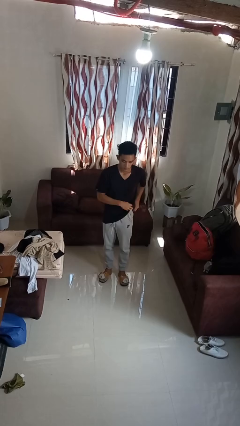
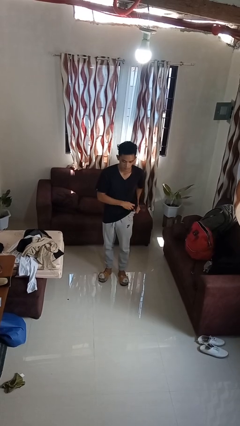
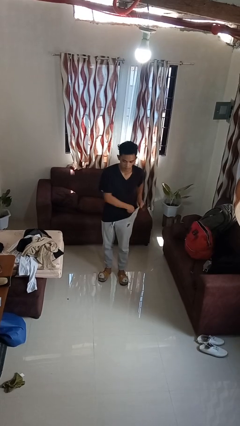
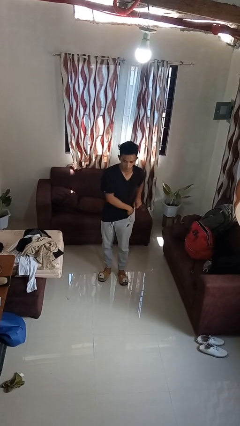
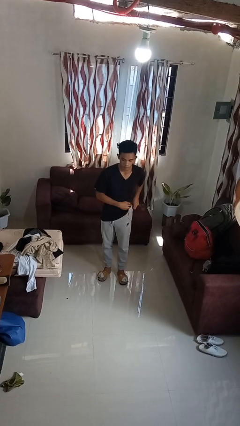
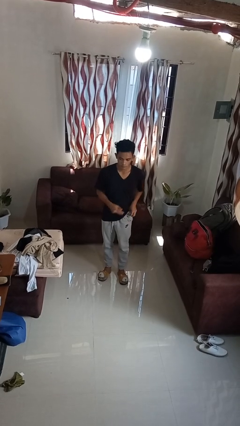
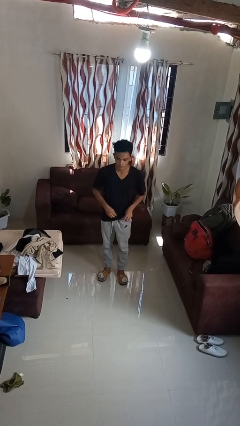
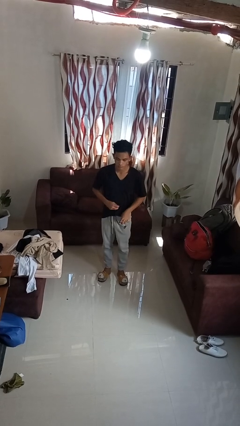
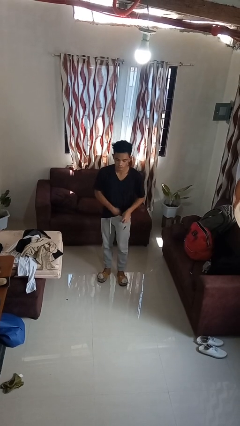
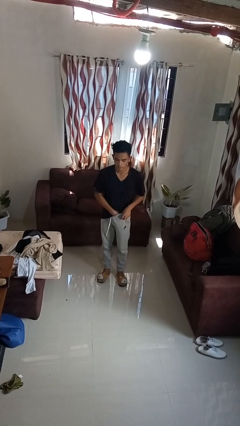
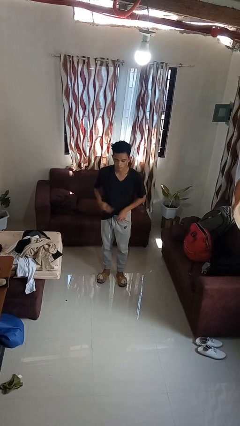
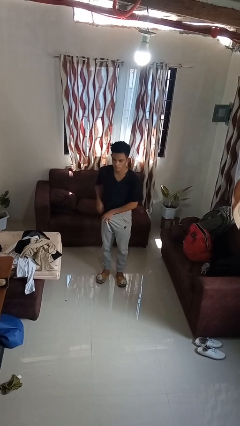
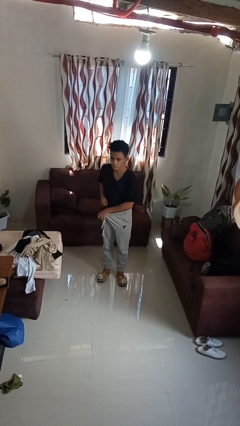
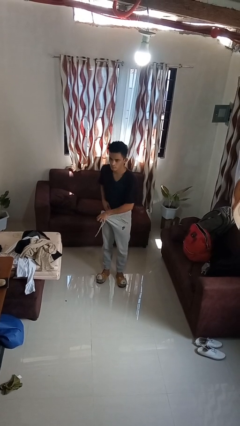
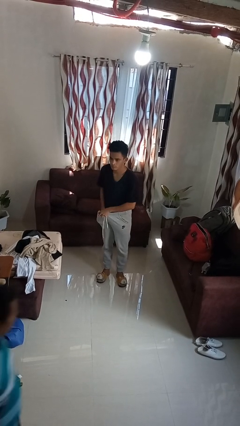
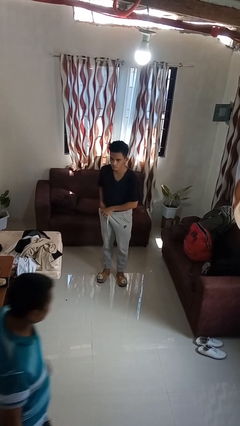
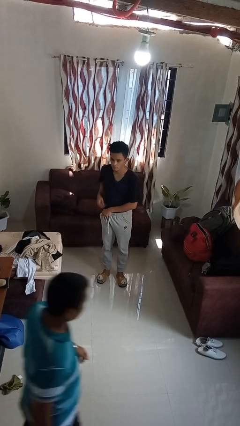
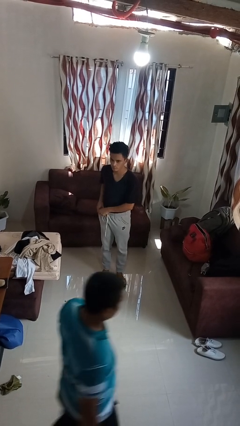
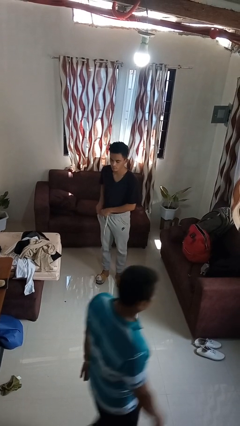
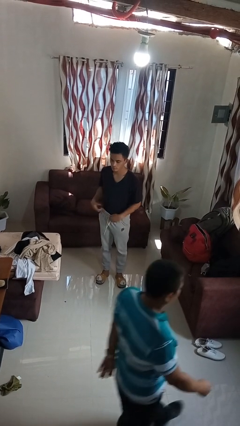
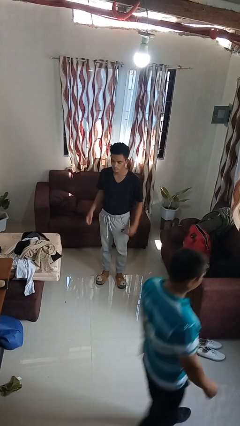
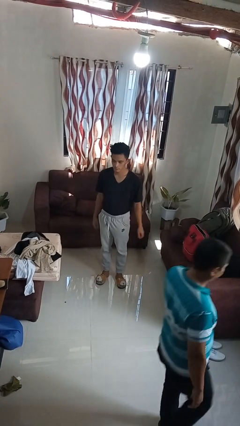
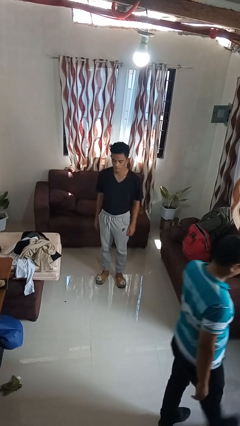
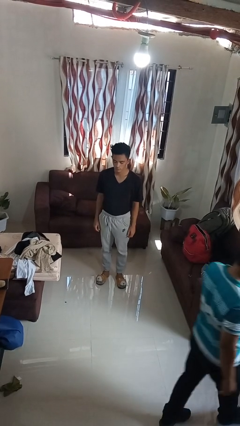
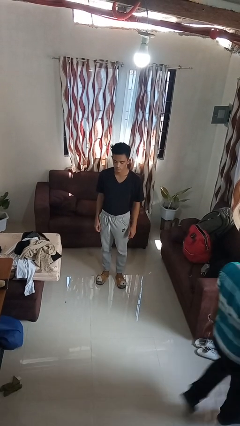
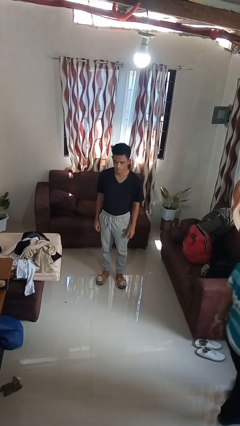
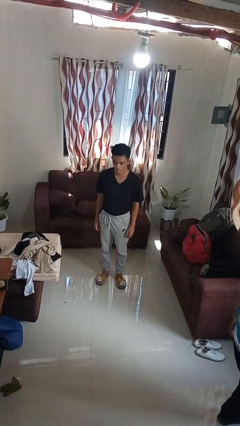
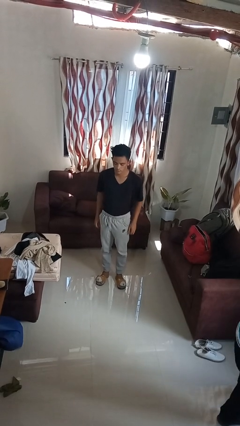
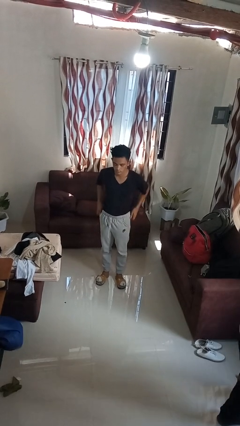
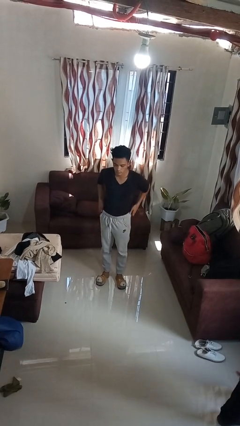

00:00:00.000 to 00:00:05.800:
person tucks in shirt

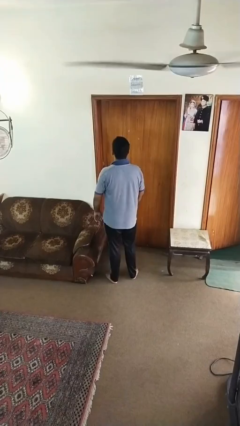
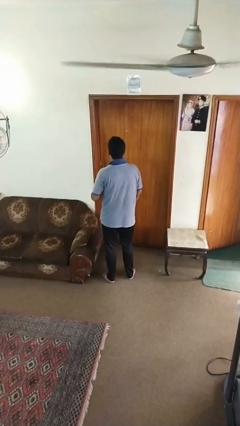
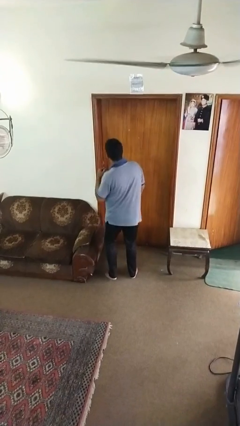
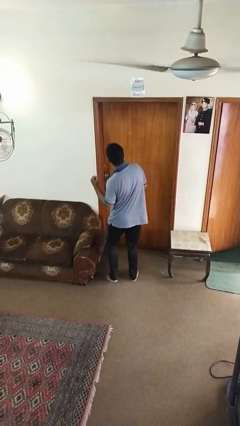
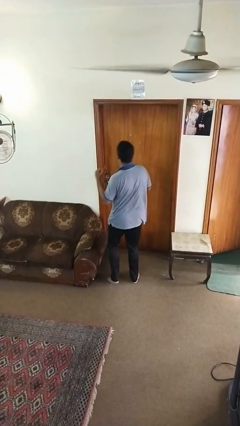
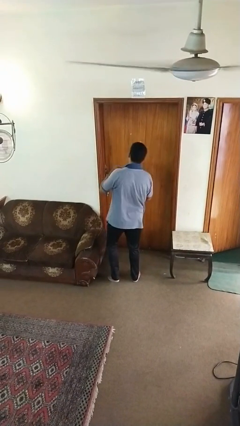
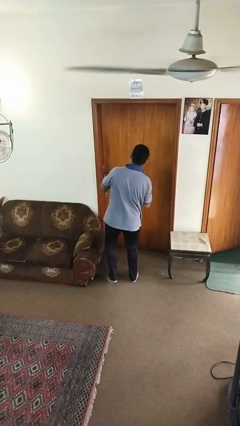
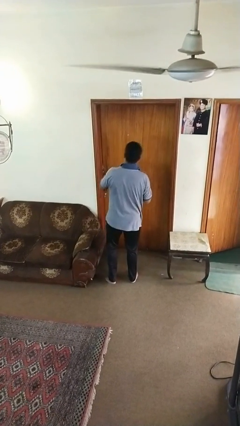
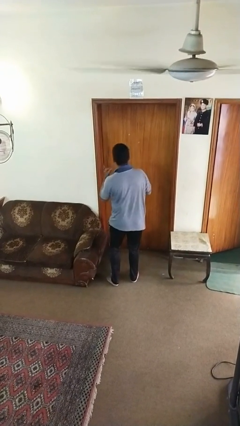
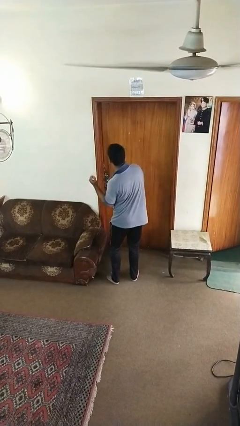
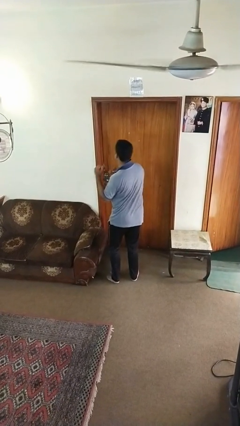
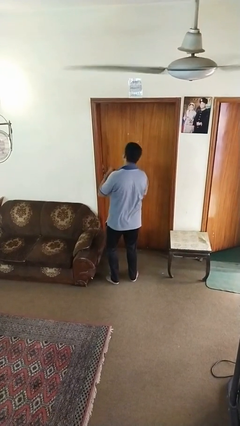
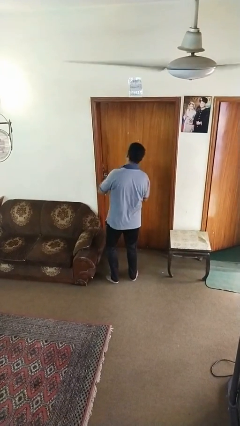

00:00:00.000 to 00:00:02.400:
person dances in place

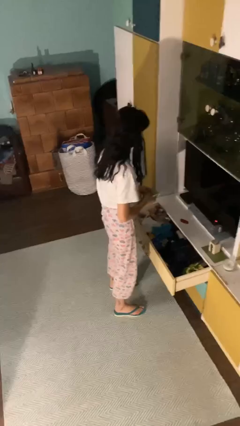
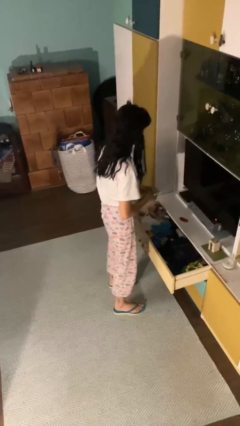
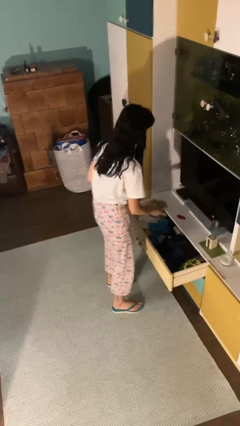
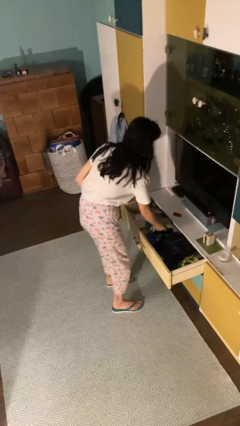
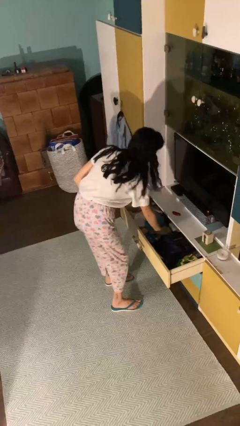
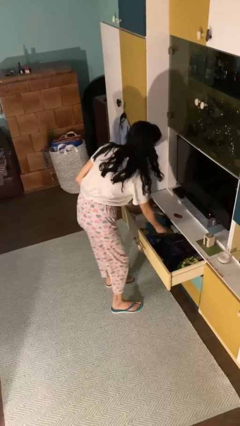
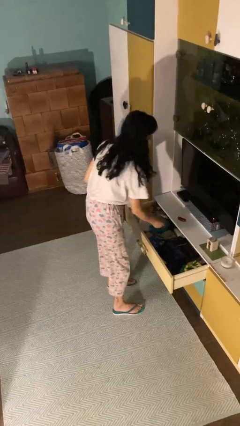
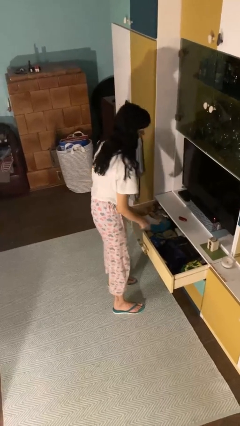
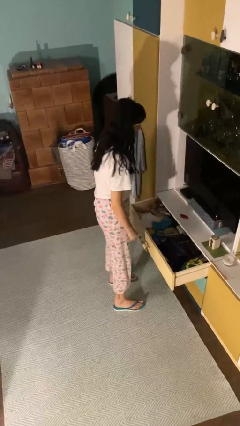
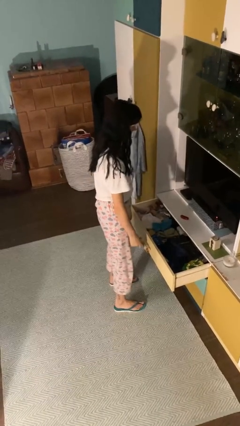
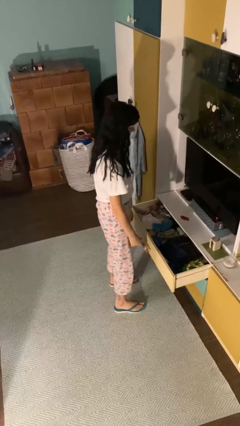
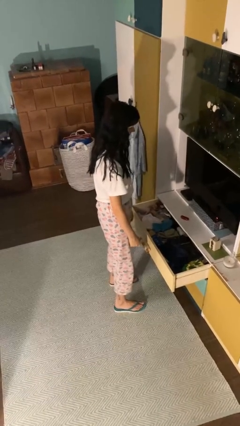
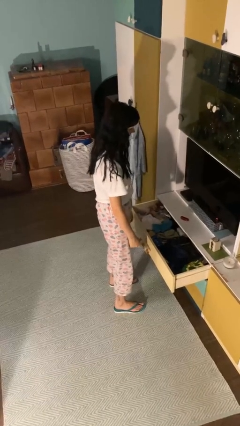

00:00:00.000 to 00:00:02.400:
person puts clothes into dresser

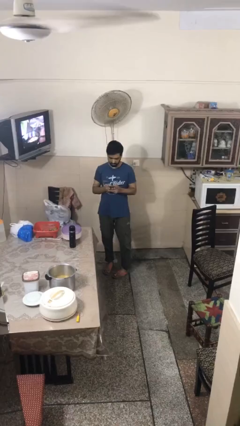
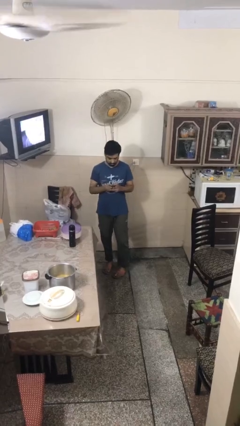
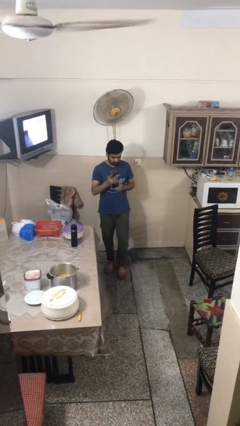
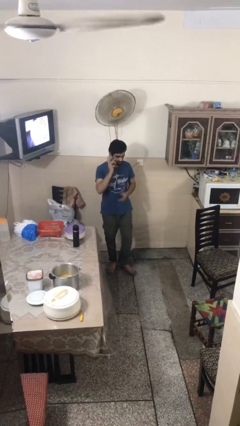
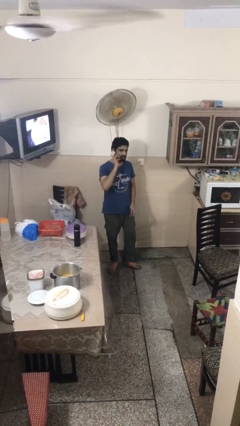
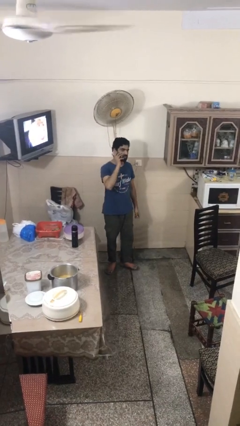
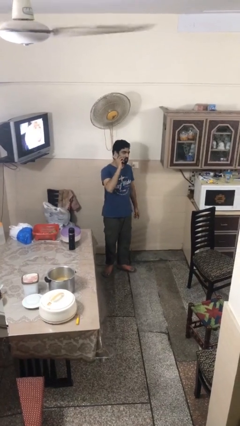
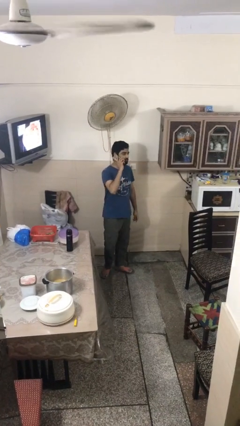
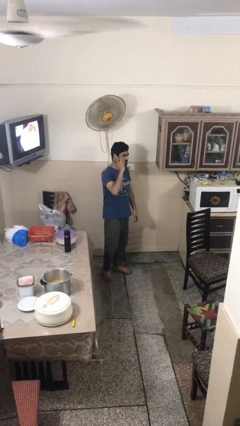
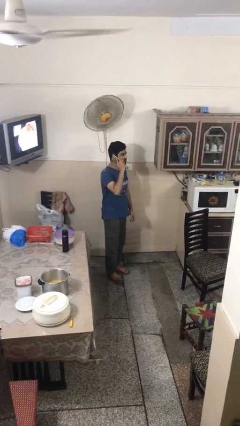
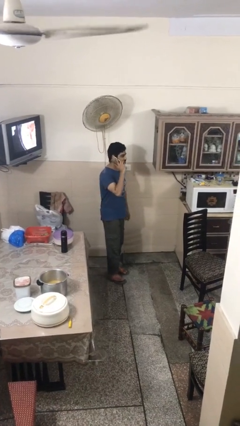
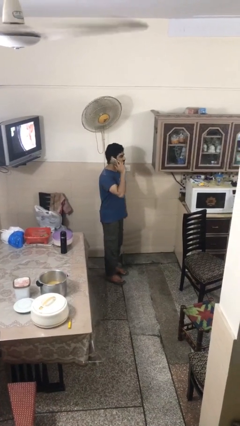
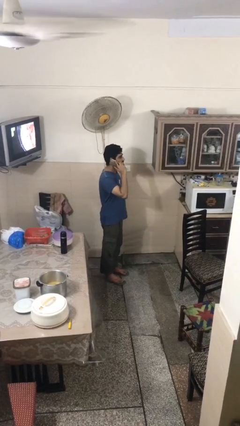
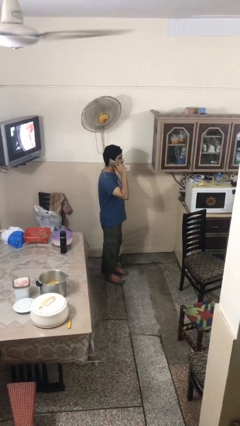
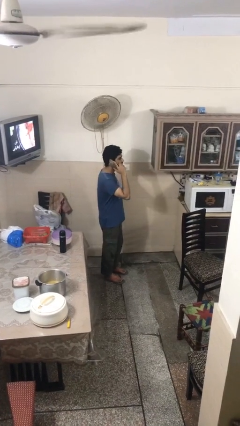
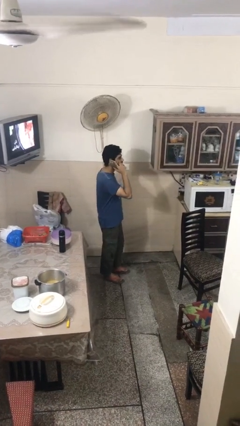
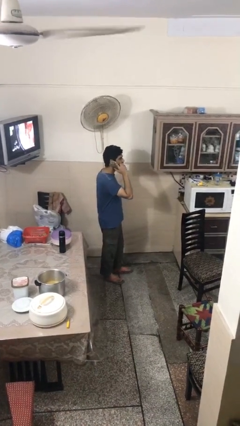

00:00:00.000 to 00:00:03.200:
person talks on phone

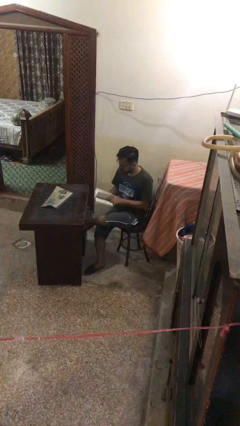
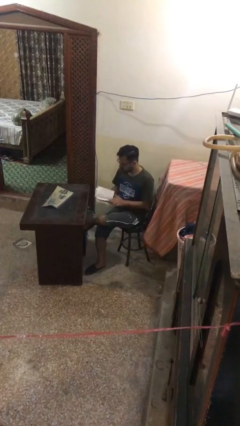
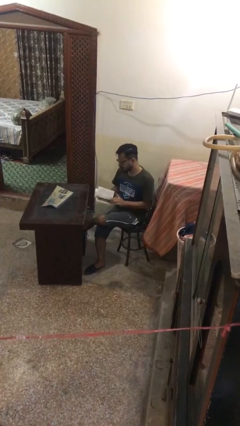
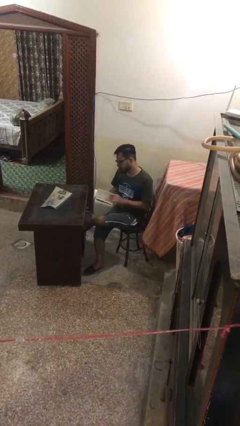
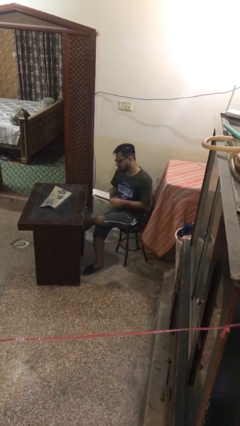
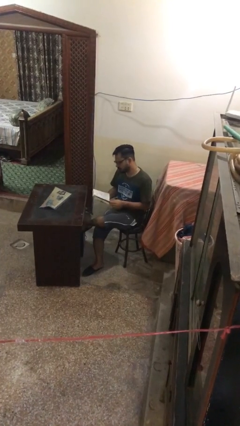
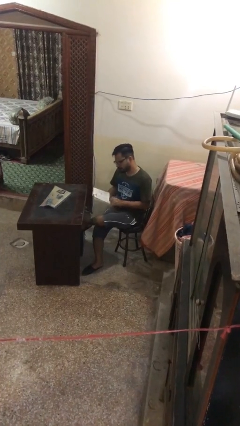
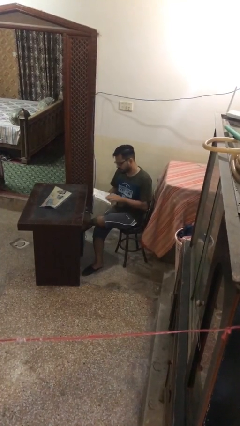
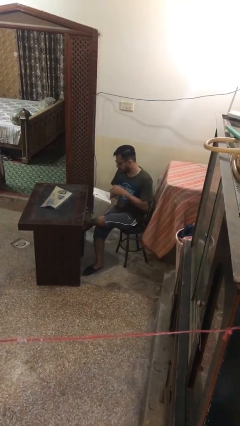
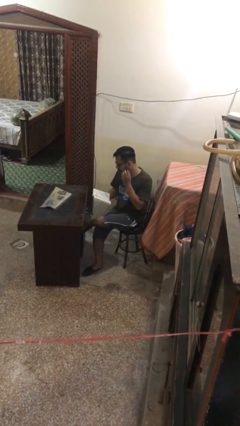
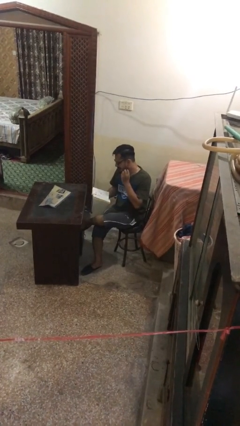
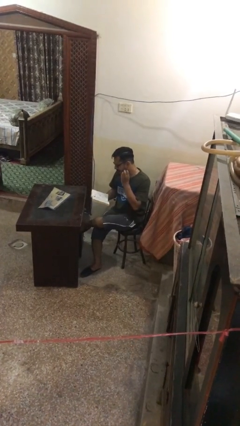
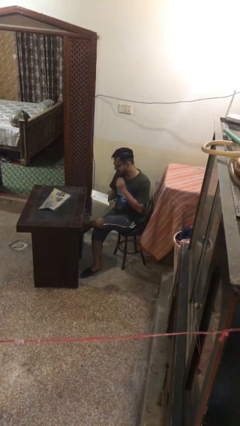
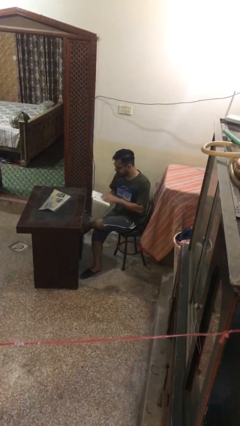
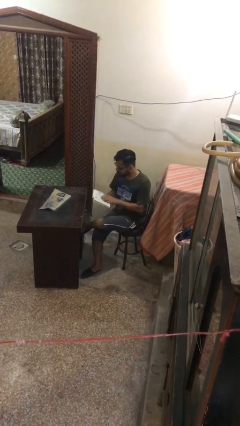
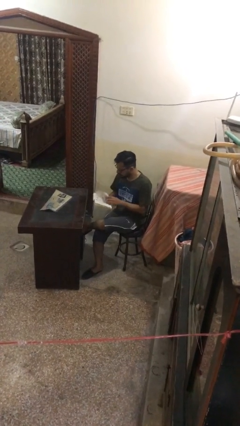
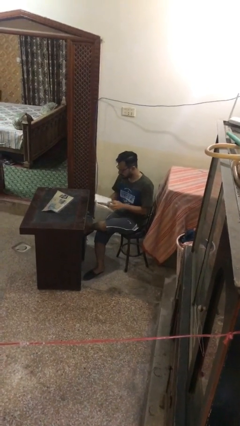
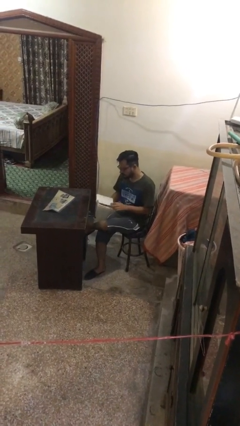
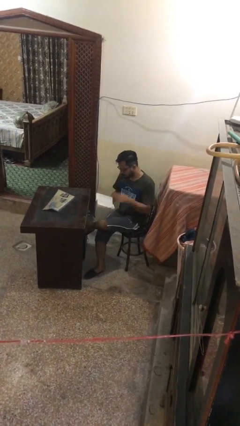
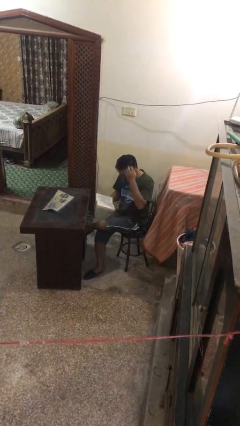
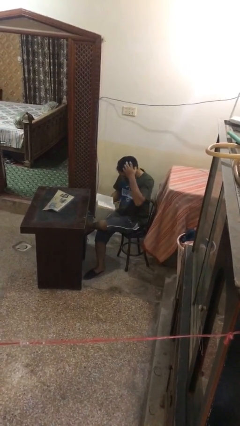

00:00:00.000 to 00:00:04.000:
person reads document
